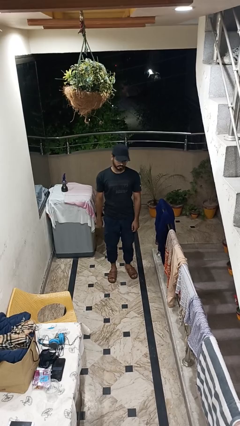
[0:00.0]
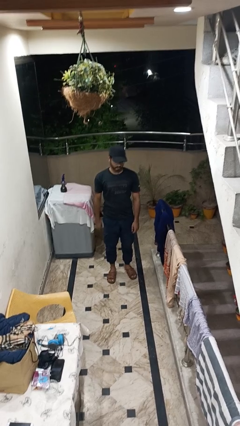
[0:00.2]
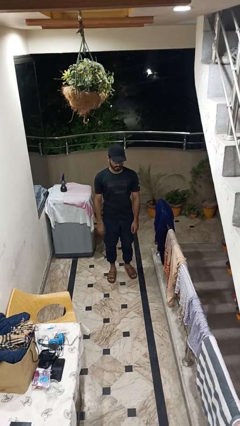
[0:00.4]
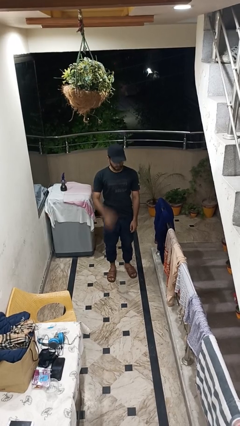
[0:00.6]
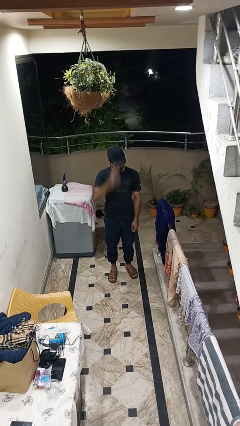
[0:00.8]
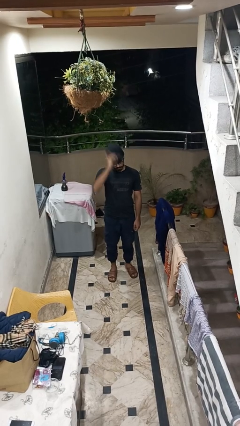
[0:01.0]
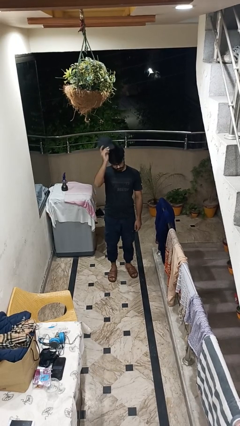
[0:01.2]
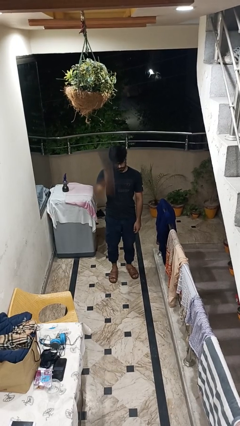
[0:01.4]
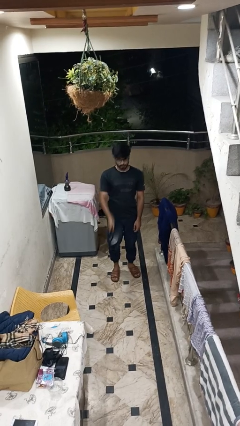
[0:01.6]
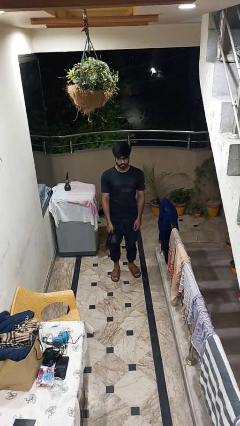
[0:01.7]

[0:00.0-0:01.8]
person takes off hat

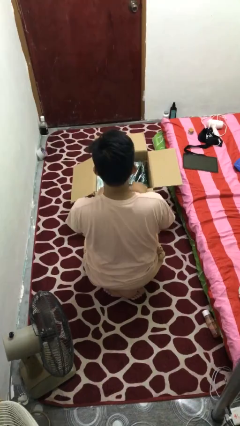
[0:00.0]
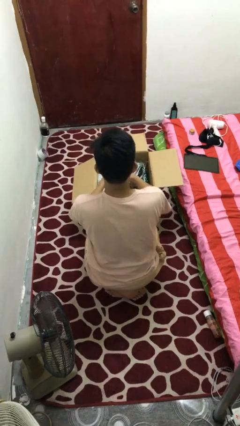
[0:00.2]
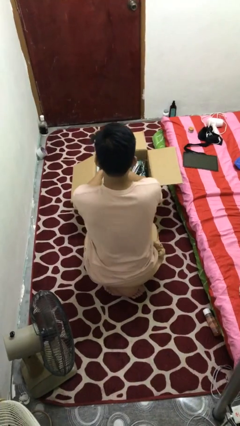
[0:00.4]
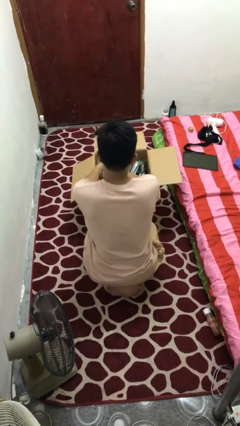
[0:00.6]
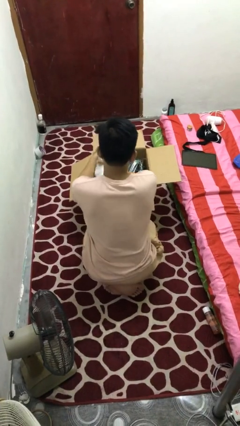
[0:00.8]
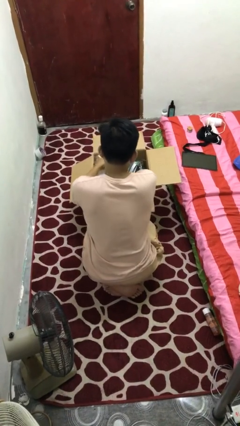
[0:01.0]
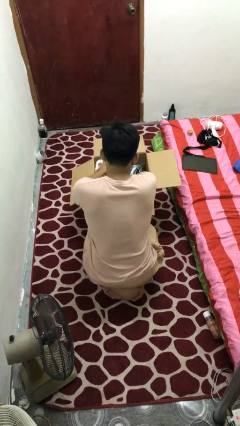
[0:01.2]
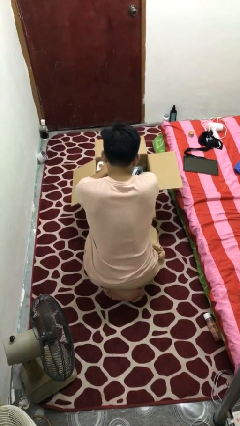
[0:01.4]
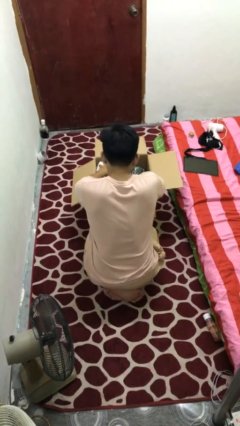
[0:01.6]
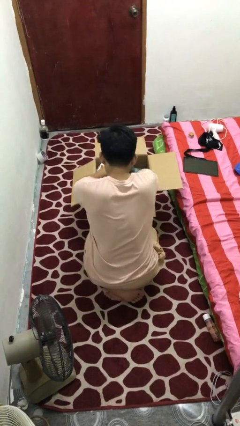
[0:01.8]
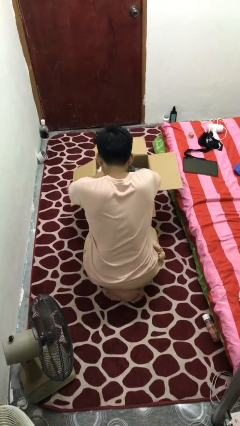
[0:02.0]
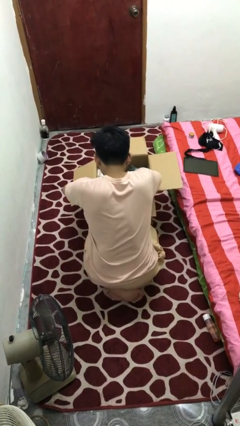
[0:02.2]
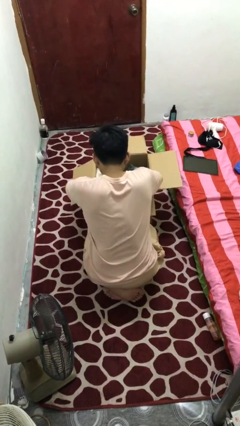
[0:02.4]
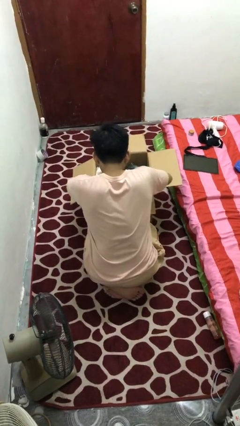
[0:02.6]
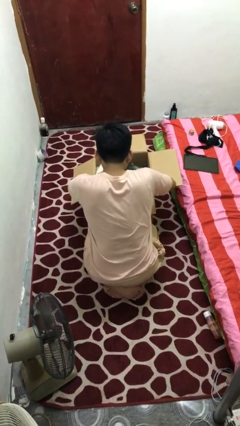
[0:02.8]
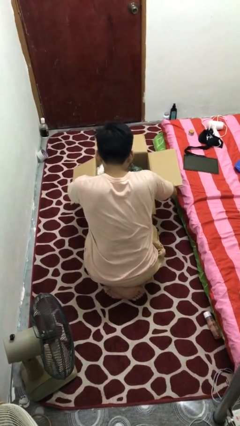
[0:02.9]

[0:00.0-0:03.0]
person searches in box

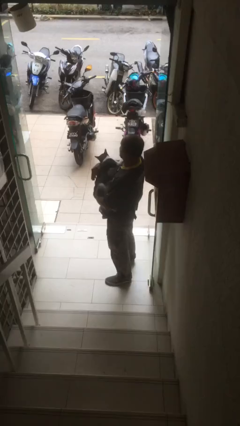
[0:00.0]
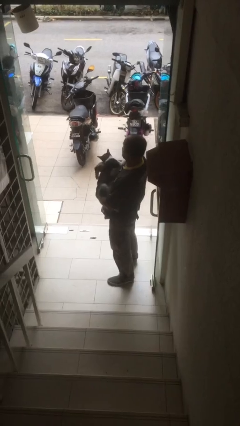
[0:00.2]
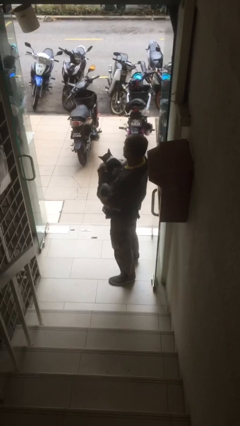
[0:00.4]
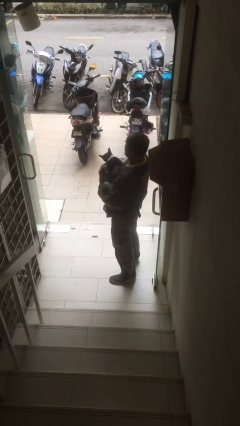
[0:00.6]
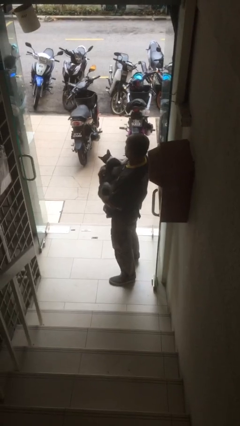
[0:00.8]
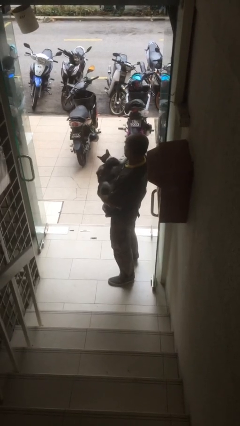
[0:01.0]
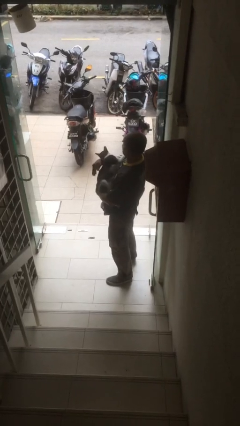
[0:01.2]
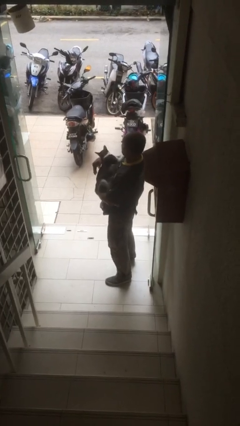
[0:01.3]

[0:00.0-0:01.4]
person hugs cat

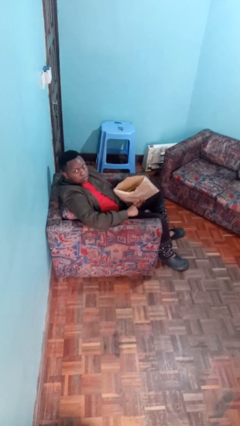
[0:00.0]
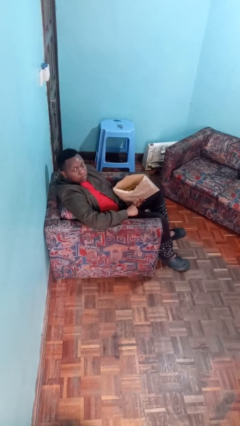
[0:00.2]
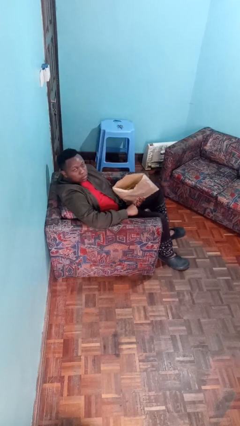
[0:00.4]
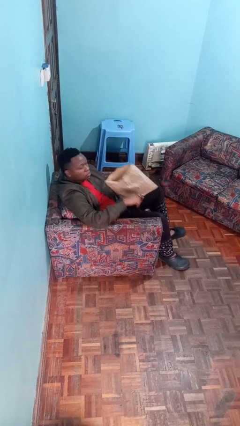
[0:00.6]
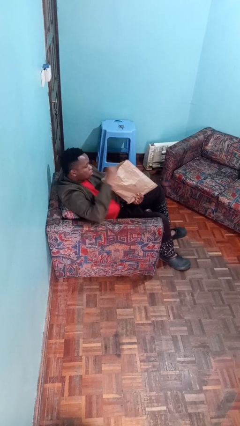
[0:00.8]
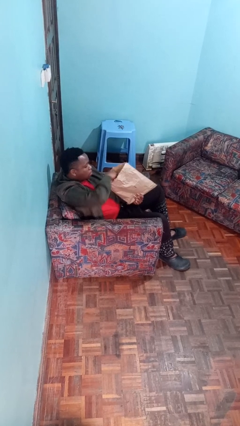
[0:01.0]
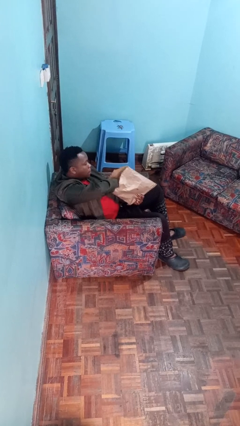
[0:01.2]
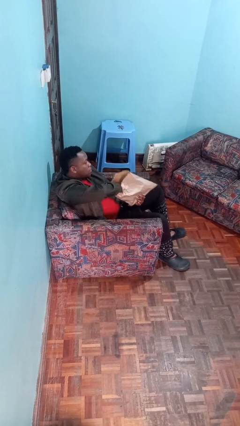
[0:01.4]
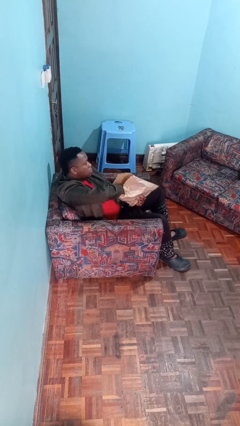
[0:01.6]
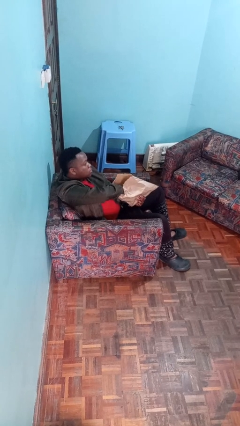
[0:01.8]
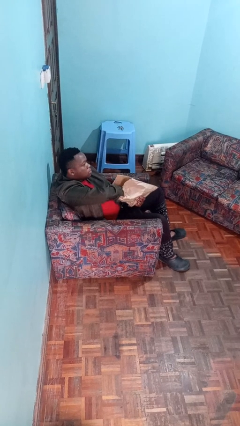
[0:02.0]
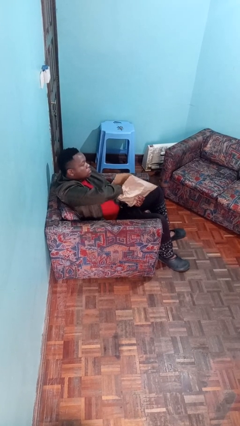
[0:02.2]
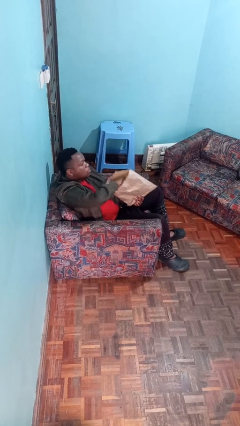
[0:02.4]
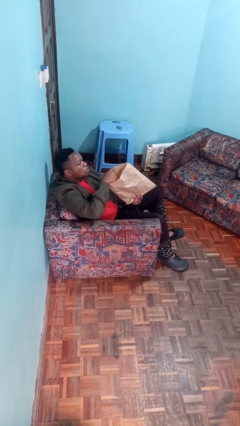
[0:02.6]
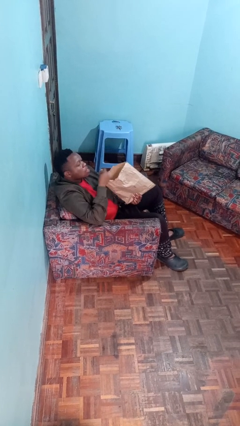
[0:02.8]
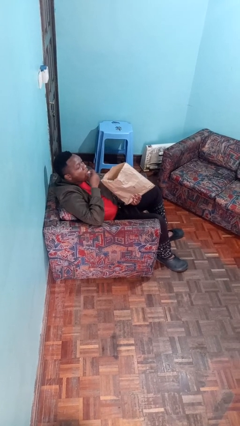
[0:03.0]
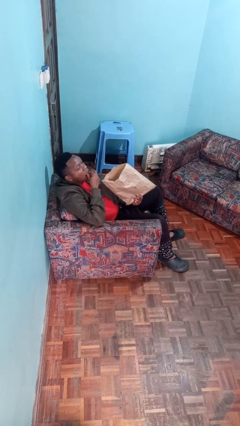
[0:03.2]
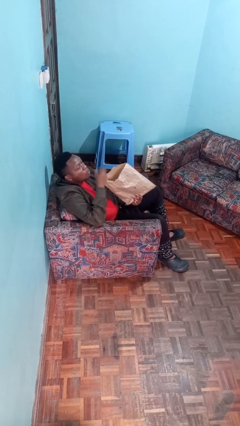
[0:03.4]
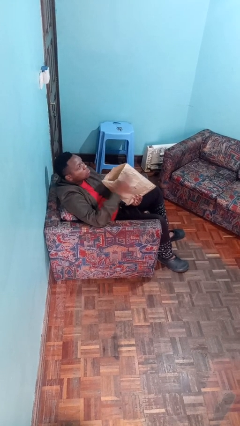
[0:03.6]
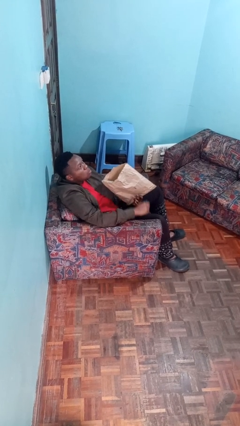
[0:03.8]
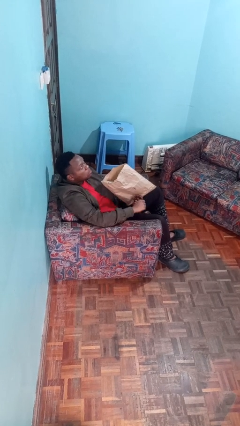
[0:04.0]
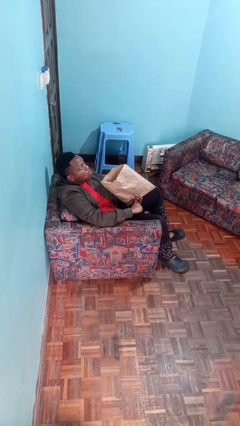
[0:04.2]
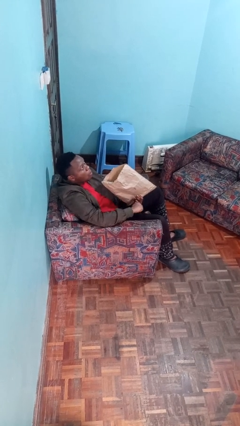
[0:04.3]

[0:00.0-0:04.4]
person eats snack from bag

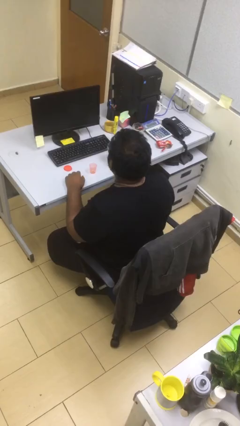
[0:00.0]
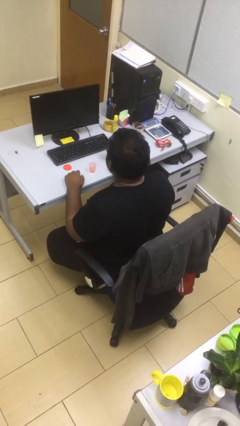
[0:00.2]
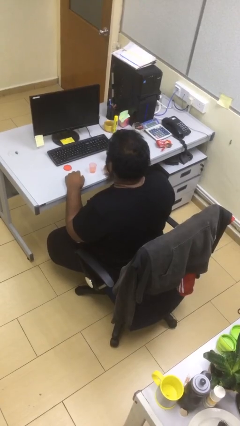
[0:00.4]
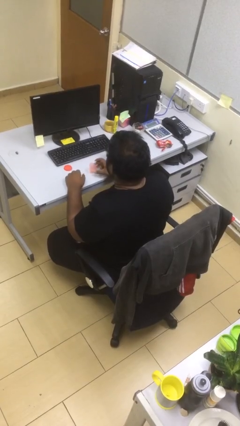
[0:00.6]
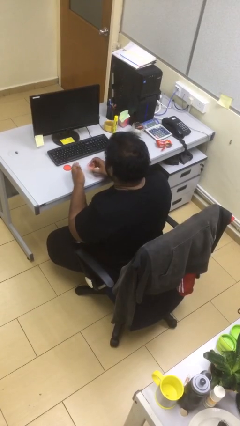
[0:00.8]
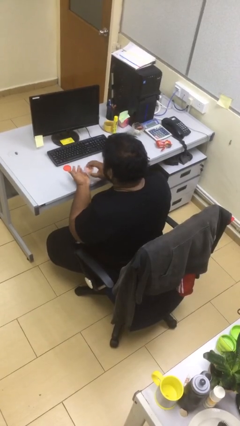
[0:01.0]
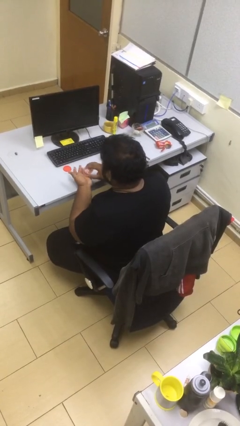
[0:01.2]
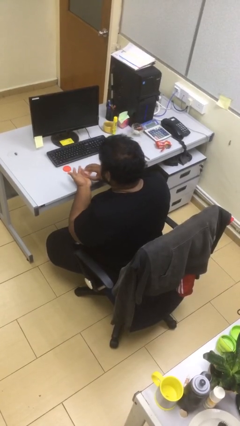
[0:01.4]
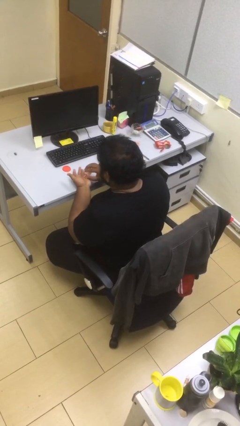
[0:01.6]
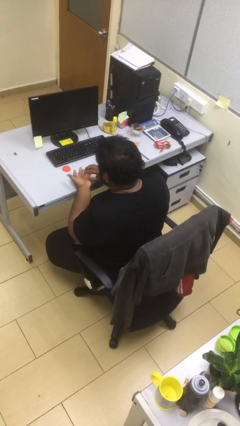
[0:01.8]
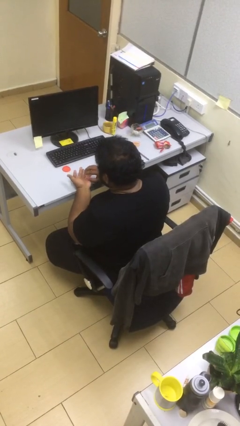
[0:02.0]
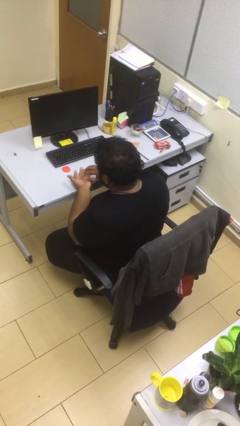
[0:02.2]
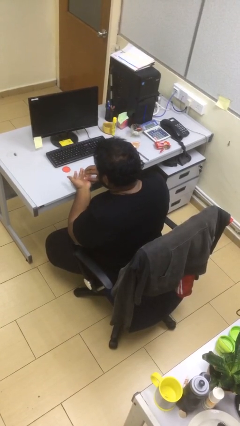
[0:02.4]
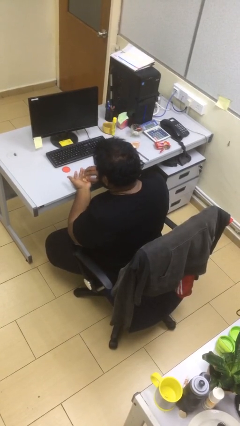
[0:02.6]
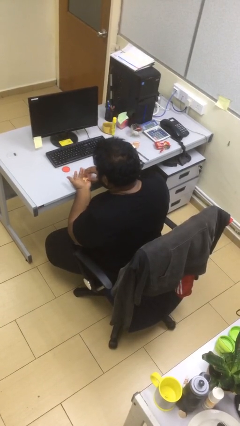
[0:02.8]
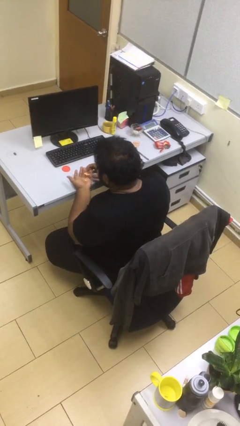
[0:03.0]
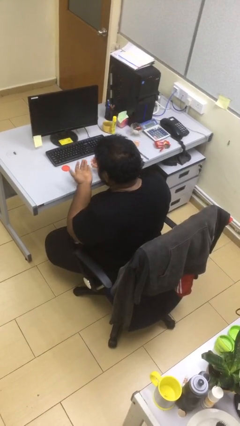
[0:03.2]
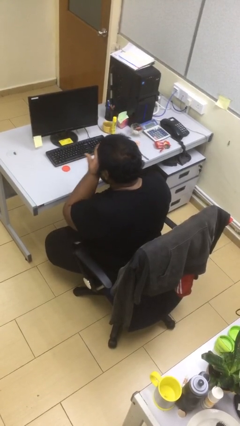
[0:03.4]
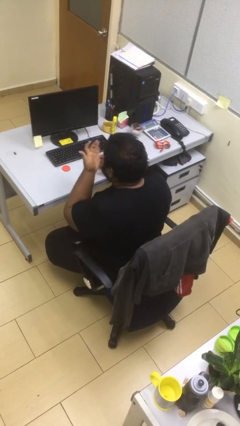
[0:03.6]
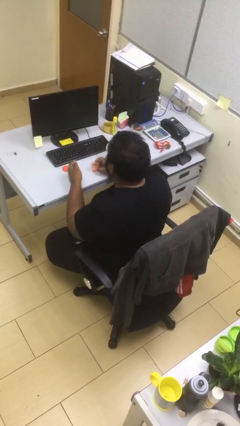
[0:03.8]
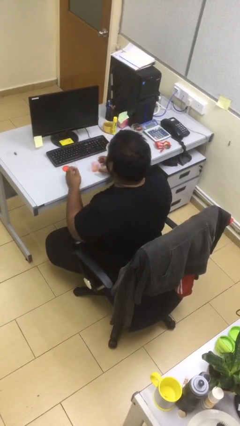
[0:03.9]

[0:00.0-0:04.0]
person takes medicine pills

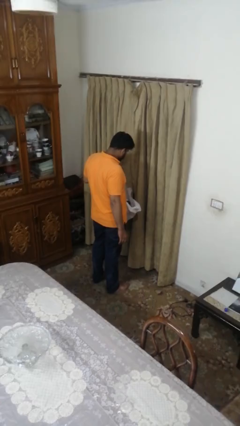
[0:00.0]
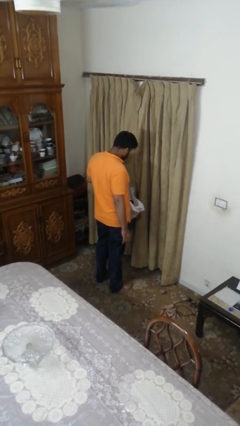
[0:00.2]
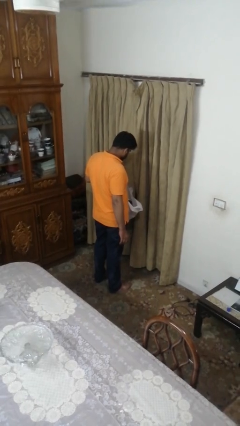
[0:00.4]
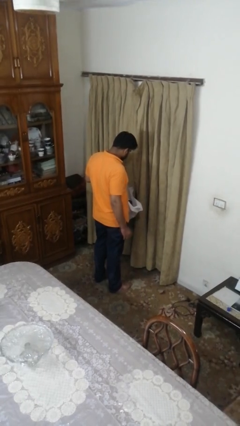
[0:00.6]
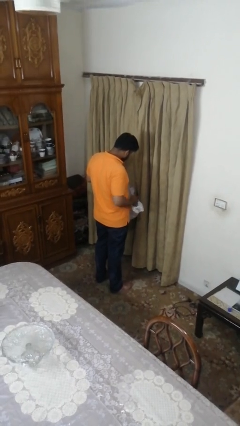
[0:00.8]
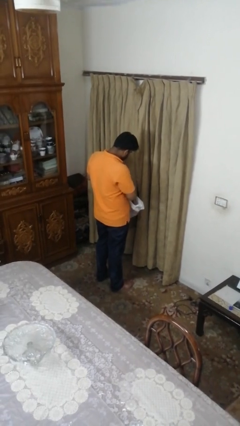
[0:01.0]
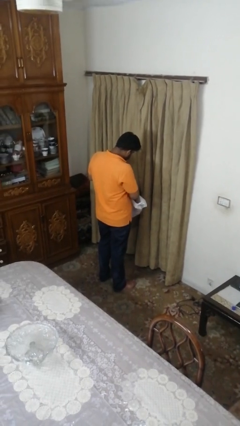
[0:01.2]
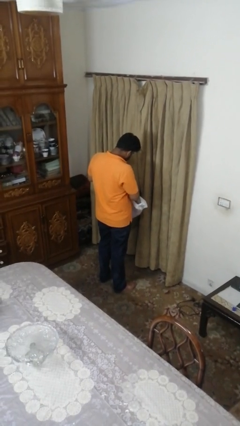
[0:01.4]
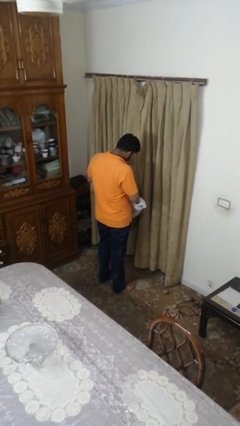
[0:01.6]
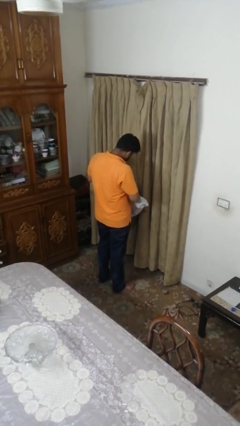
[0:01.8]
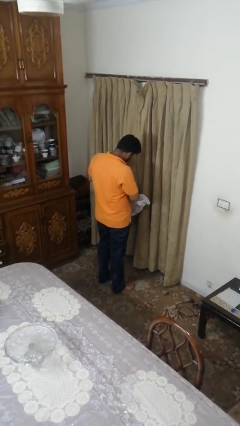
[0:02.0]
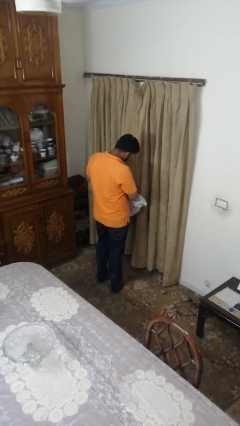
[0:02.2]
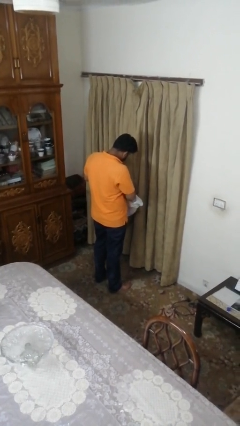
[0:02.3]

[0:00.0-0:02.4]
person searches in bag

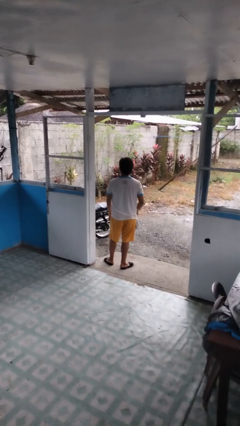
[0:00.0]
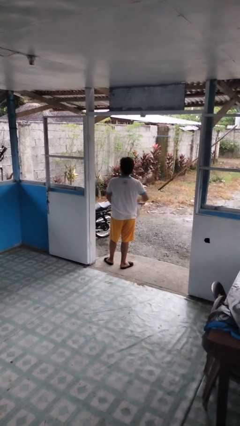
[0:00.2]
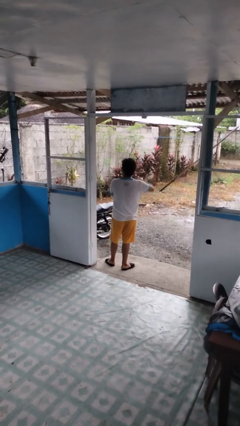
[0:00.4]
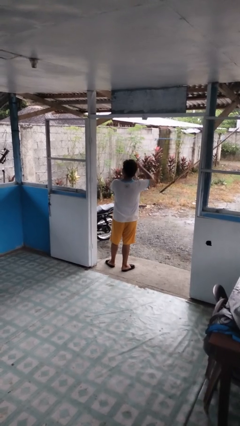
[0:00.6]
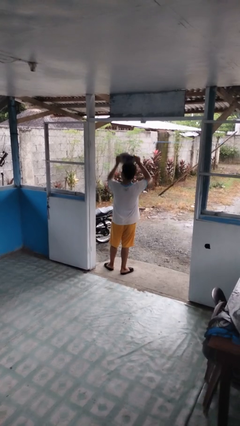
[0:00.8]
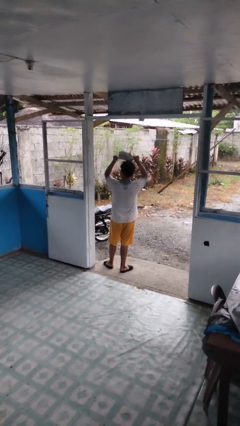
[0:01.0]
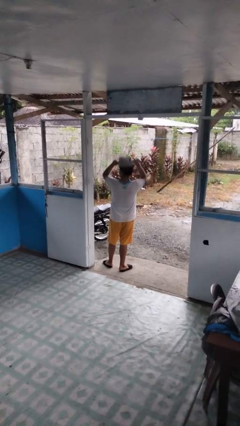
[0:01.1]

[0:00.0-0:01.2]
person puts on hat
